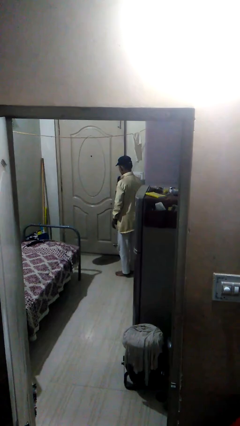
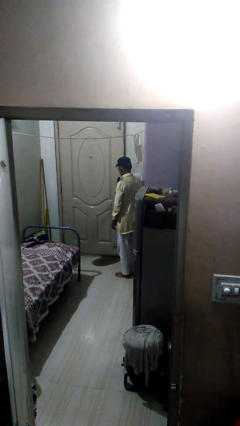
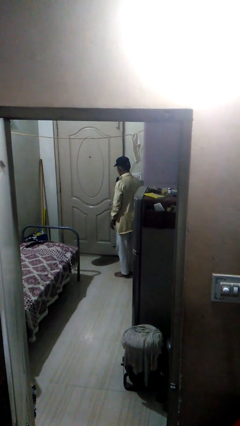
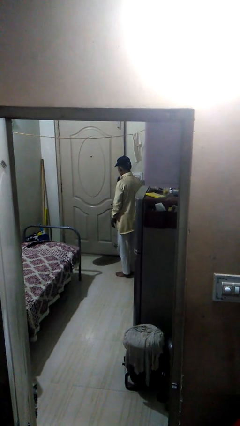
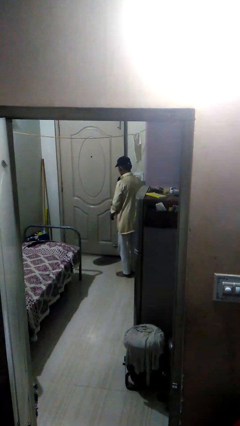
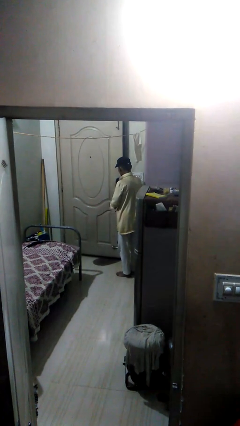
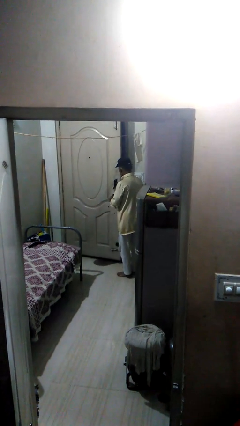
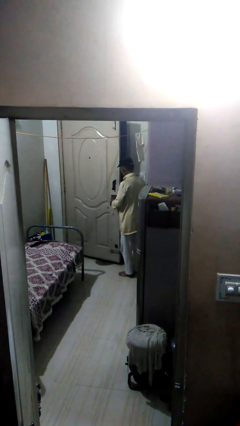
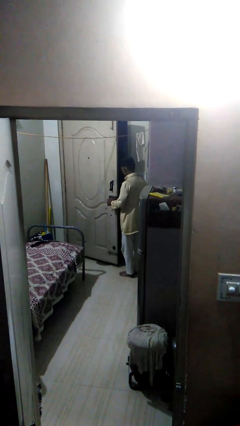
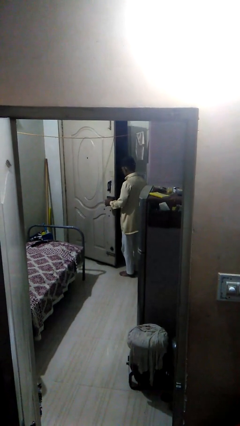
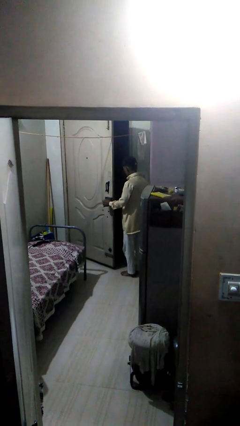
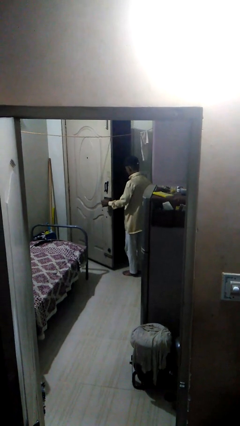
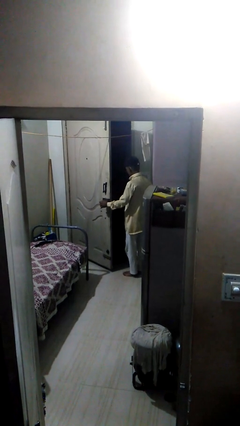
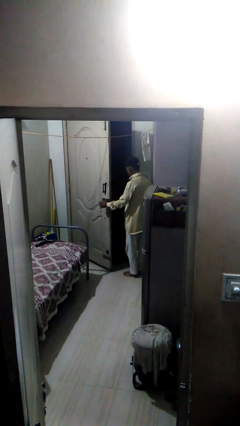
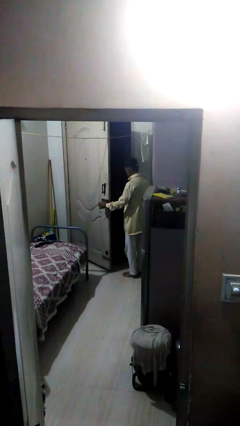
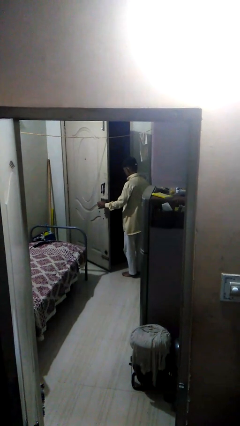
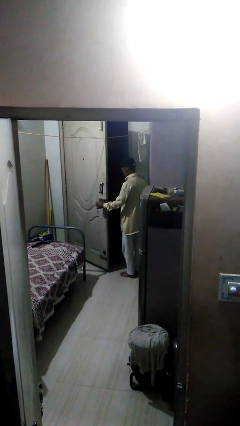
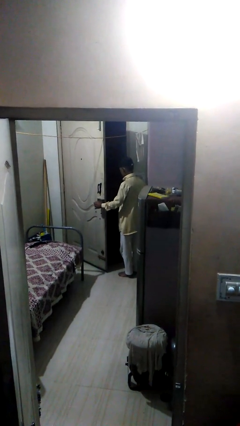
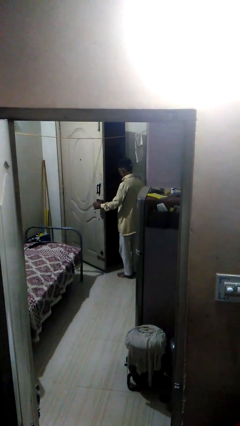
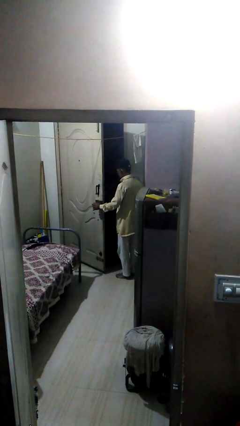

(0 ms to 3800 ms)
person opens facility door

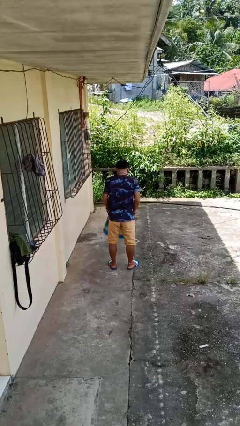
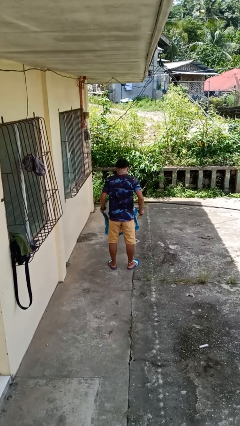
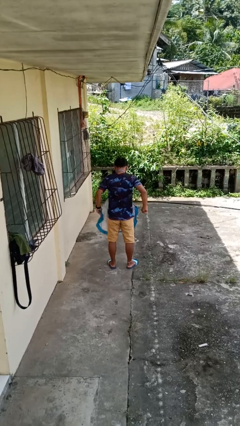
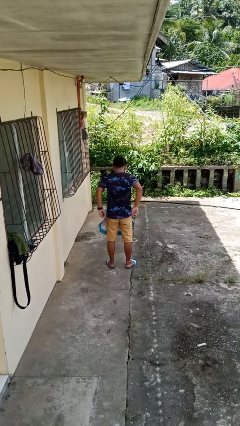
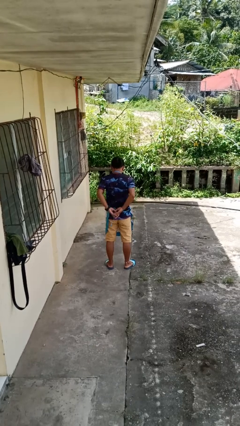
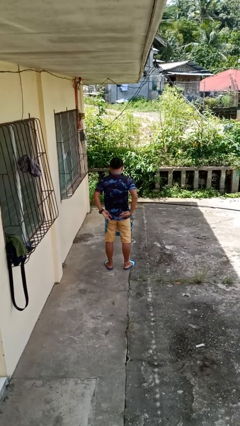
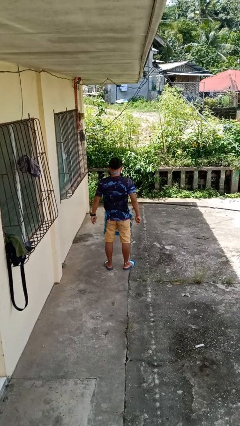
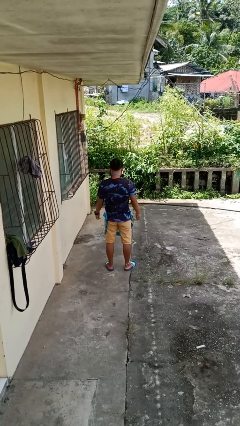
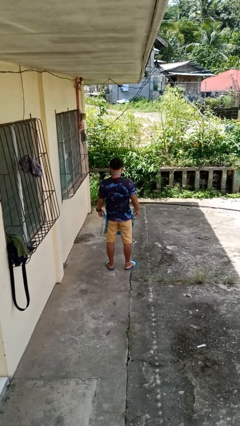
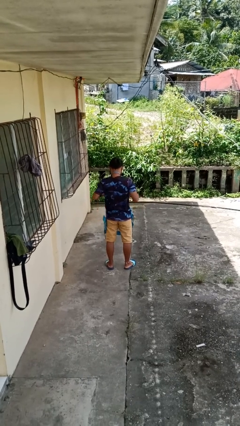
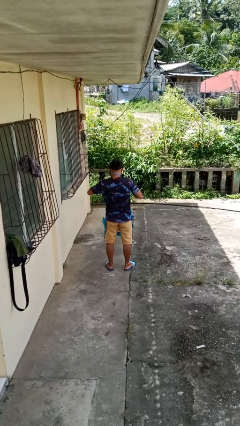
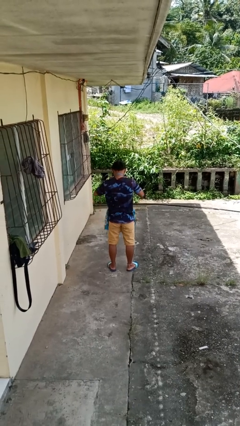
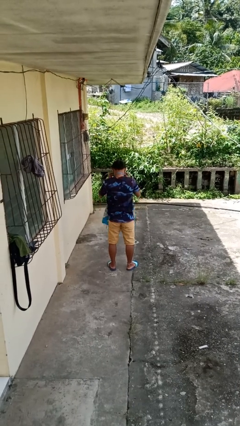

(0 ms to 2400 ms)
person puts on apron

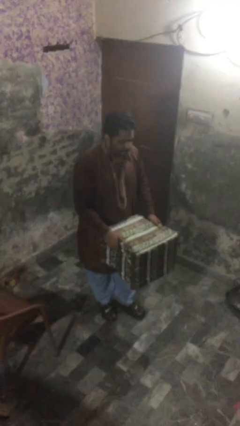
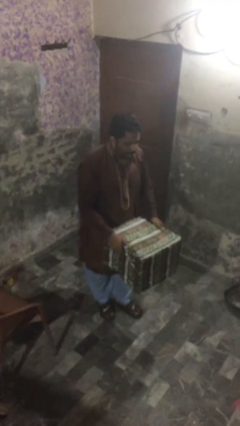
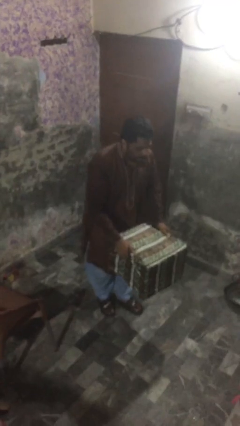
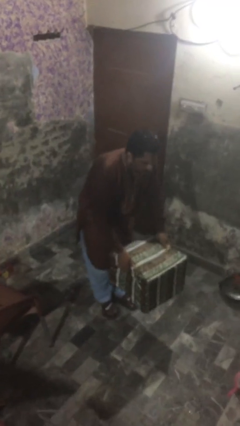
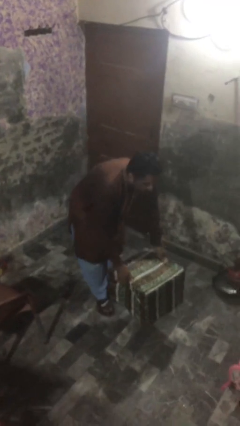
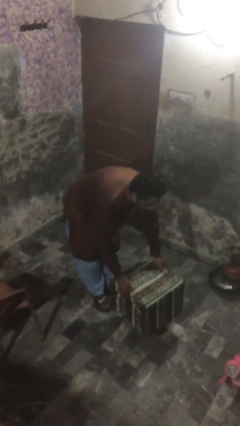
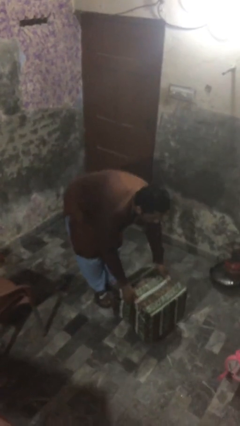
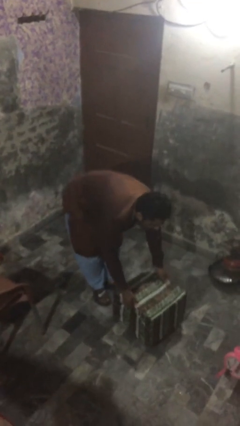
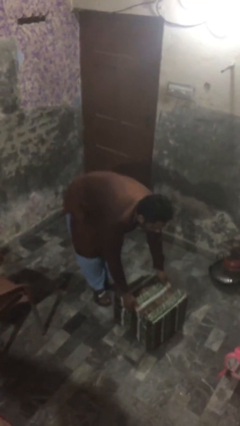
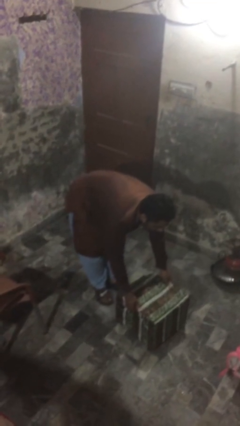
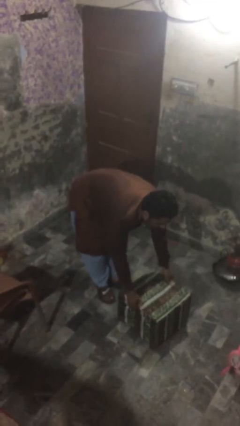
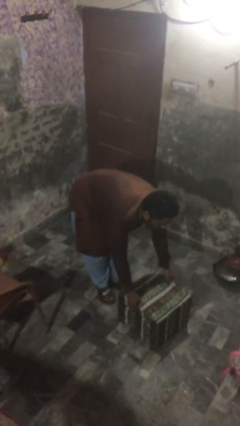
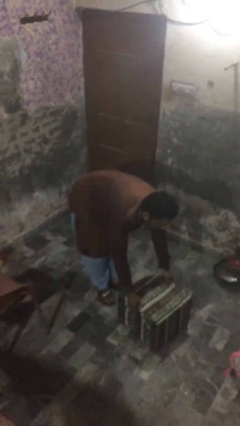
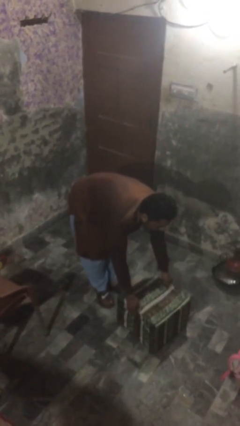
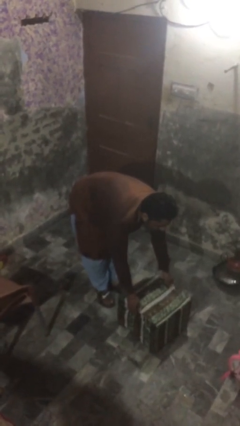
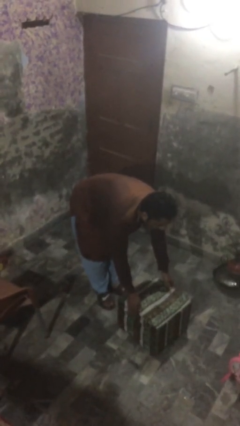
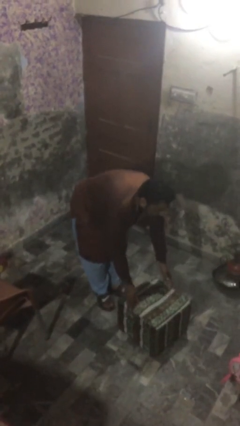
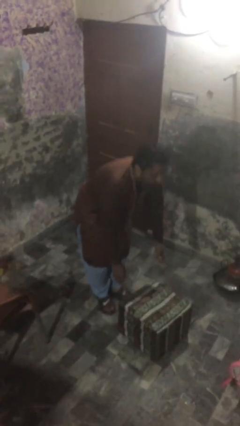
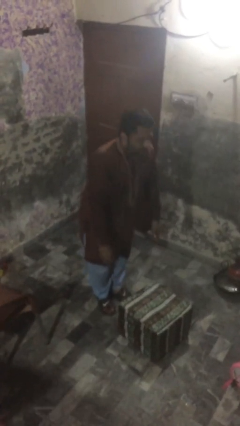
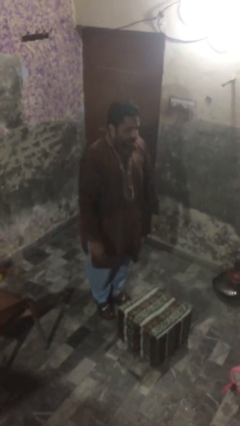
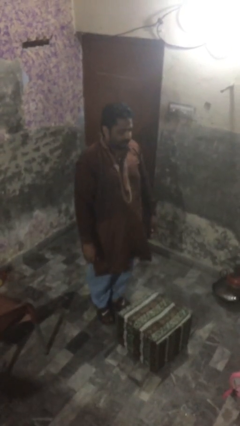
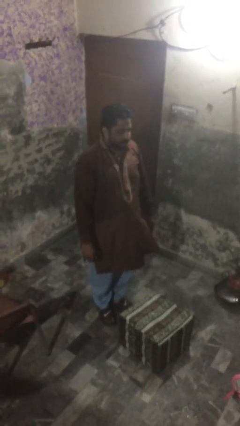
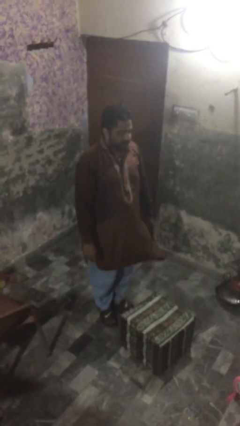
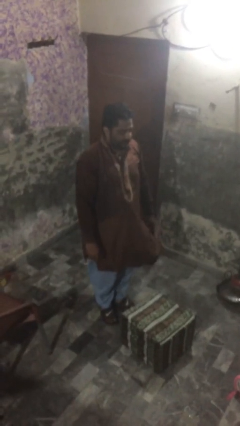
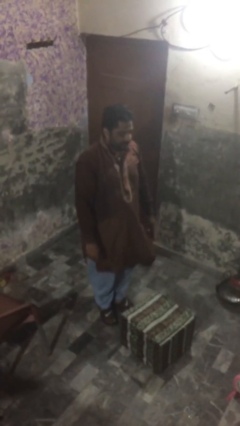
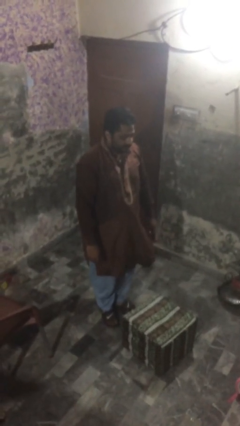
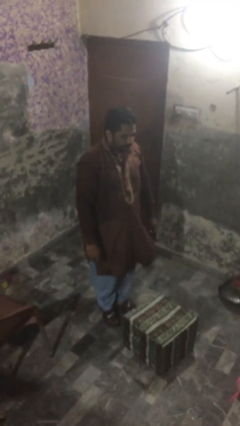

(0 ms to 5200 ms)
person puts down object on floor

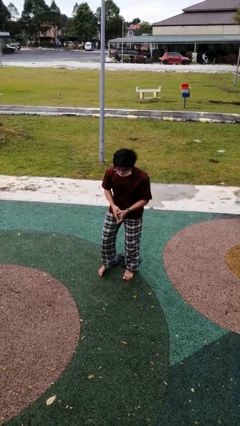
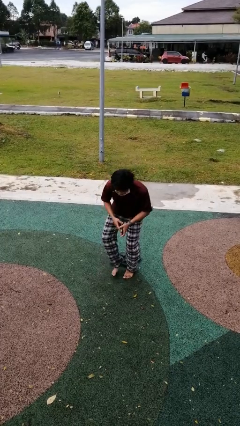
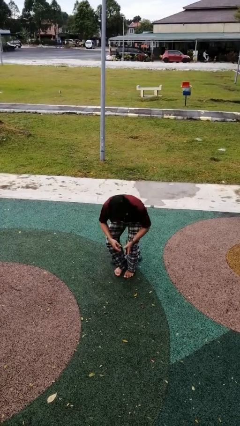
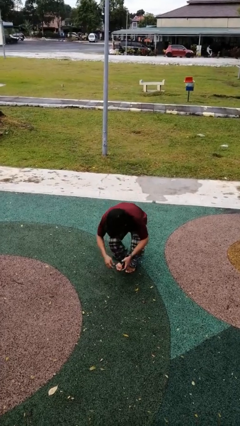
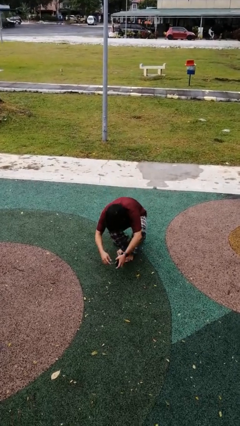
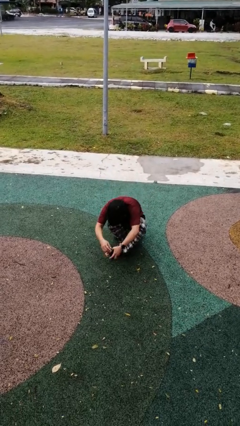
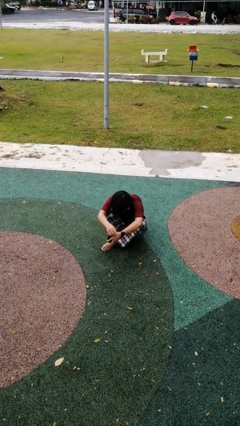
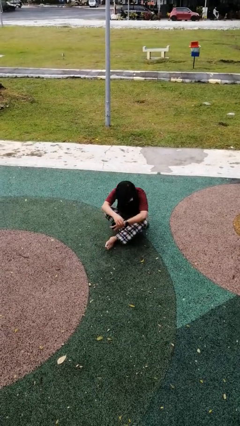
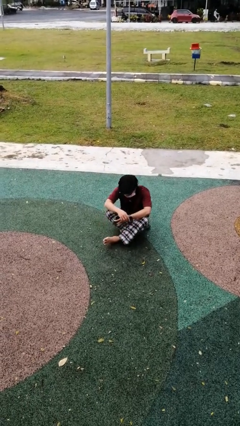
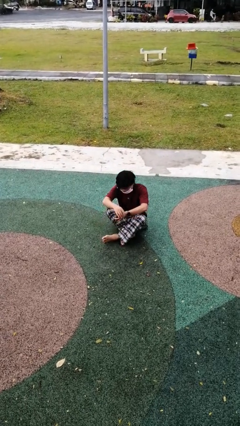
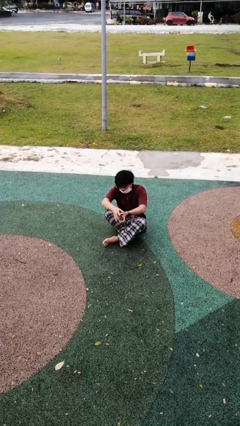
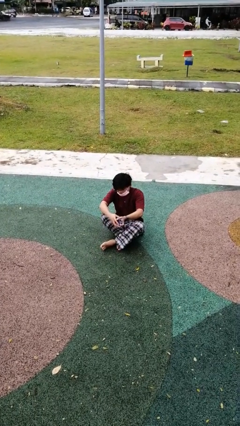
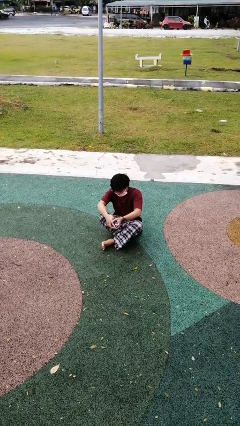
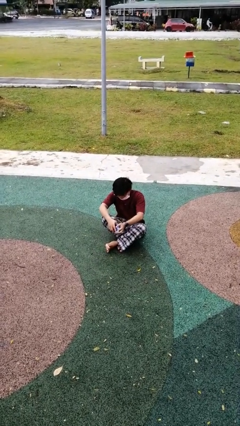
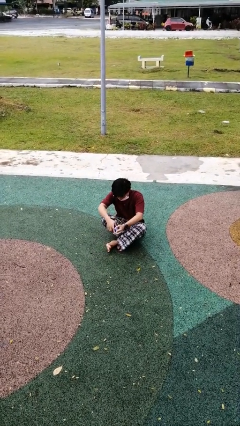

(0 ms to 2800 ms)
person sits crisscross

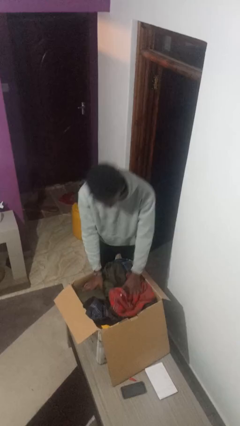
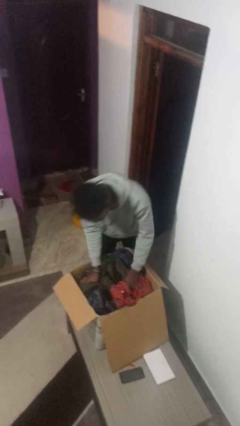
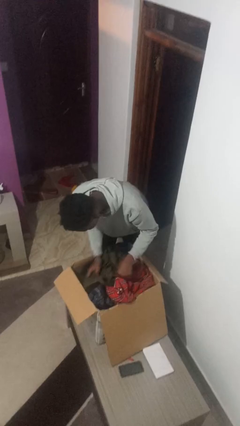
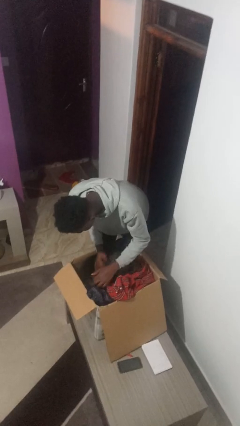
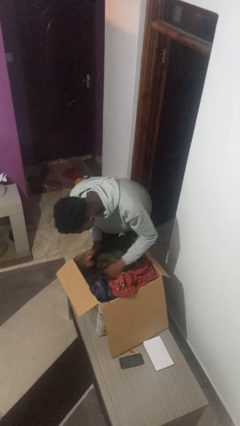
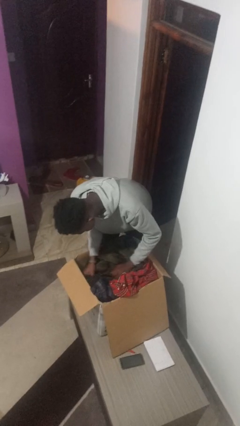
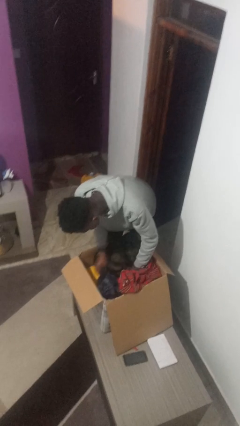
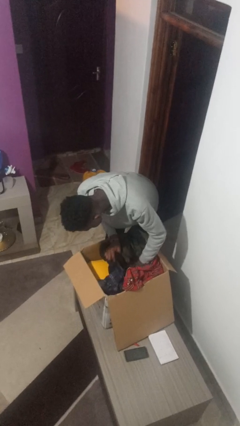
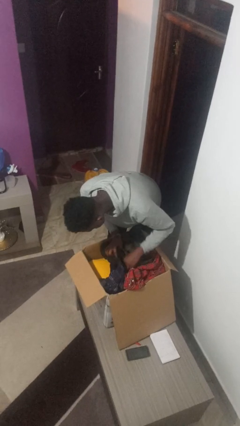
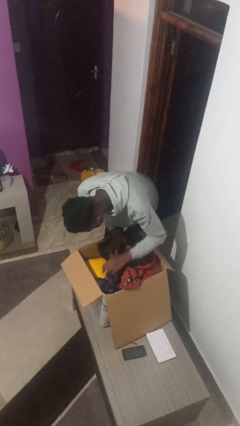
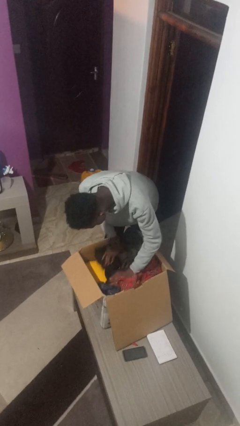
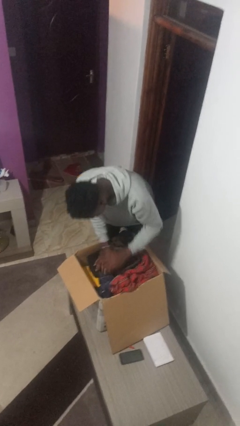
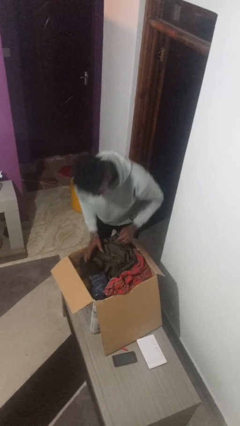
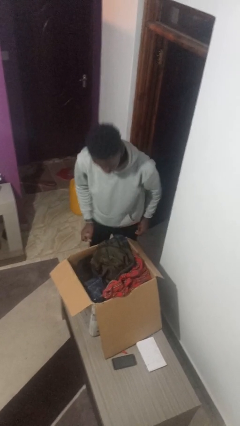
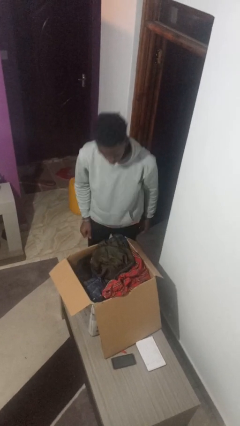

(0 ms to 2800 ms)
person searches in box

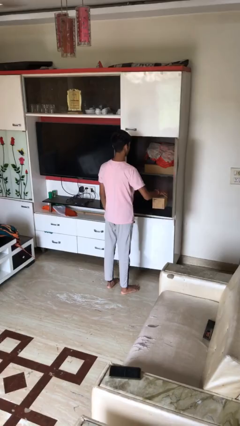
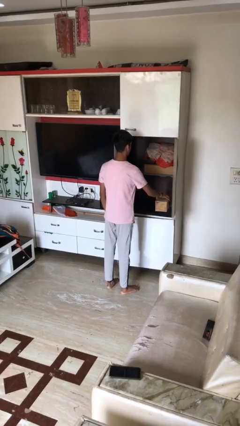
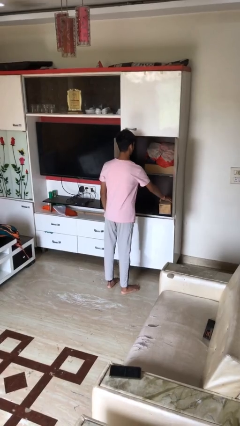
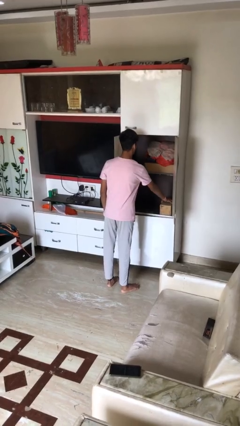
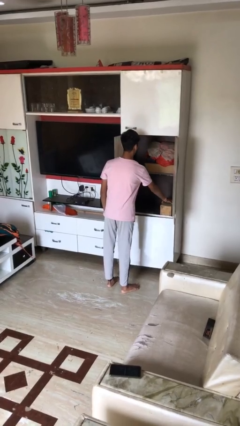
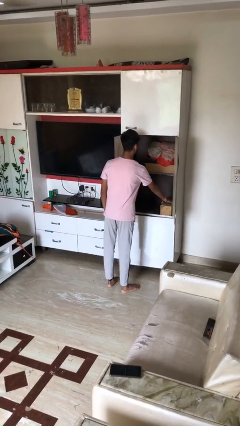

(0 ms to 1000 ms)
person puts down object into cabinet
